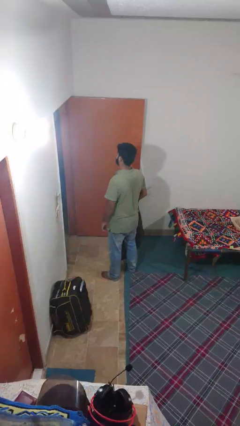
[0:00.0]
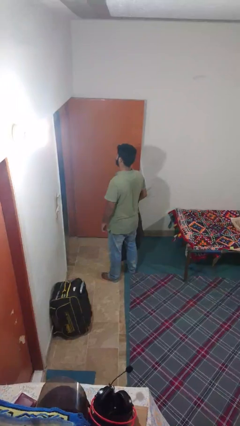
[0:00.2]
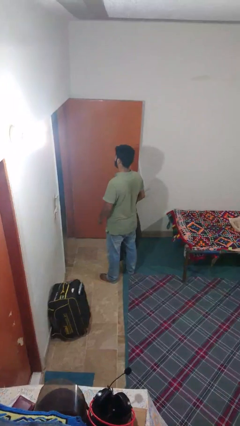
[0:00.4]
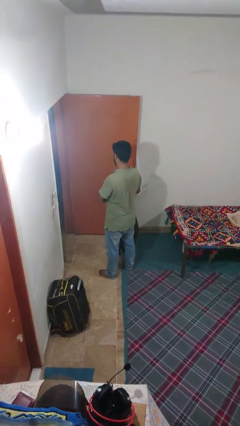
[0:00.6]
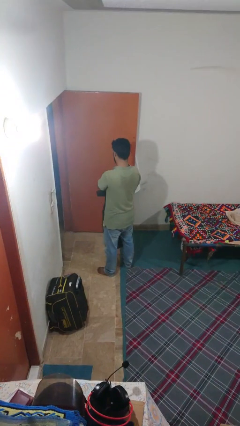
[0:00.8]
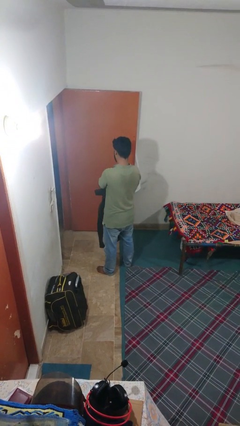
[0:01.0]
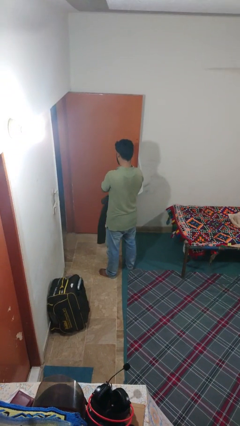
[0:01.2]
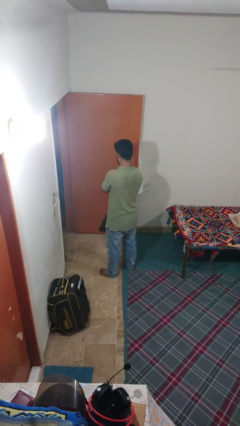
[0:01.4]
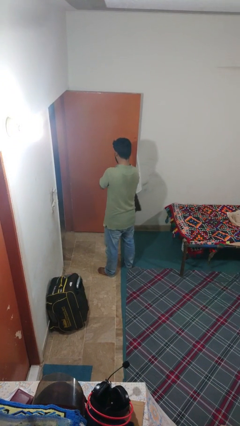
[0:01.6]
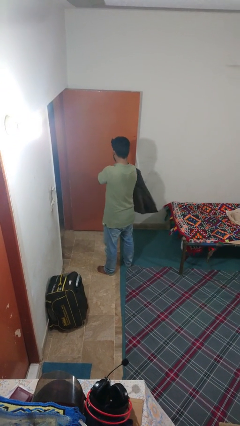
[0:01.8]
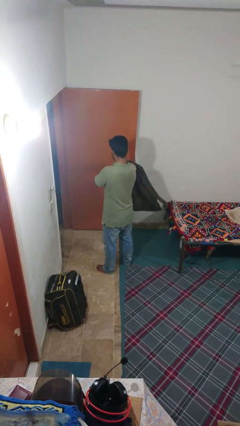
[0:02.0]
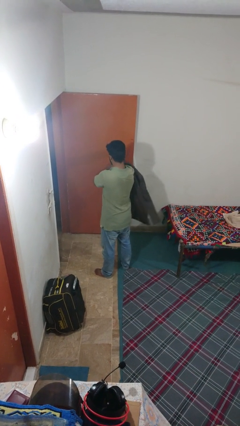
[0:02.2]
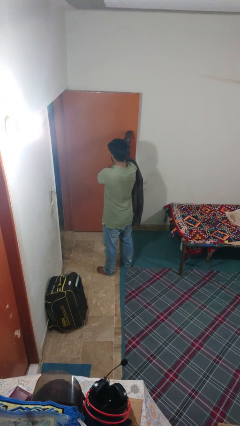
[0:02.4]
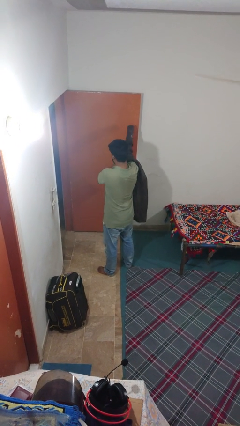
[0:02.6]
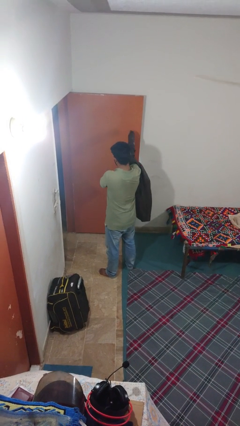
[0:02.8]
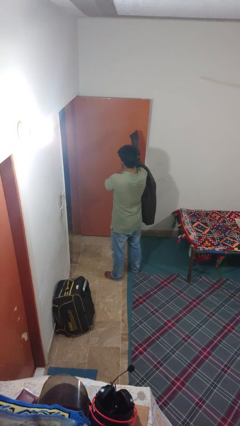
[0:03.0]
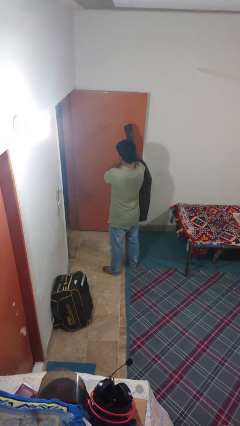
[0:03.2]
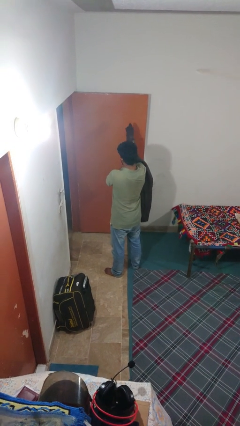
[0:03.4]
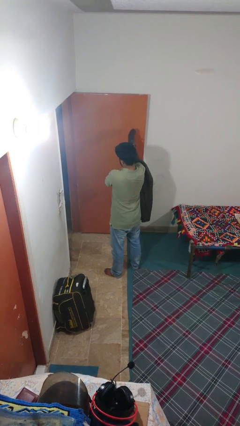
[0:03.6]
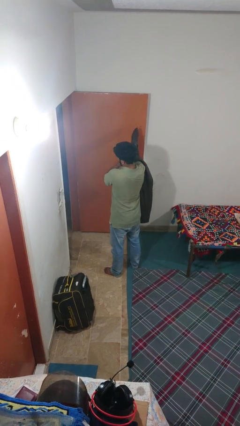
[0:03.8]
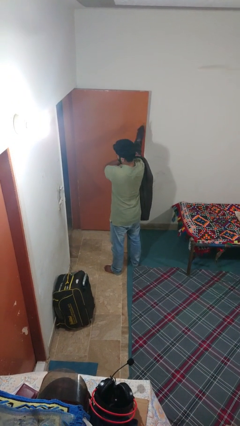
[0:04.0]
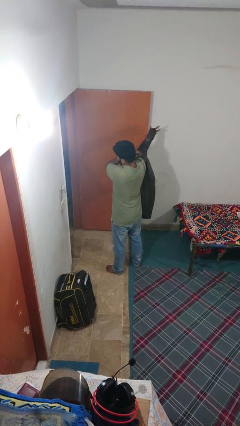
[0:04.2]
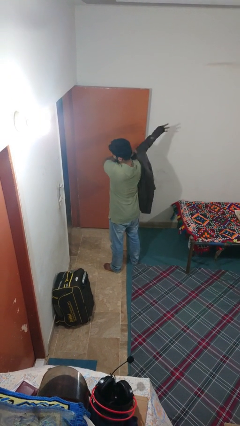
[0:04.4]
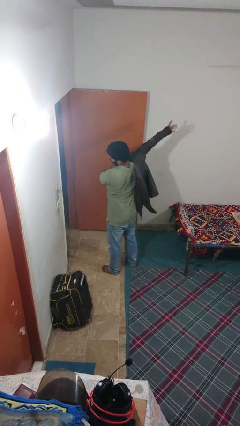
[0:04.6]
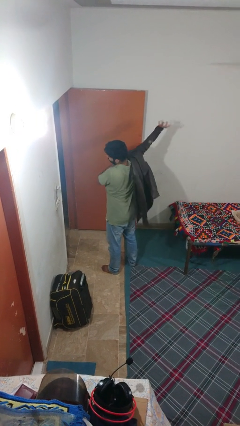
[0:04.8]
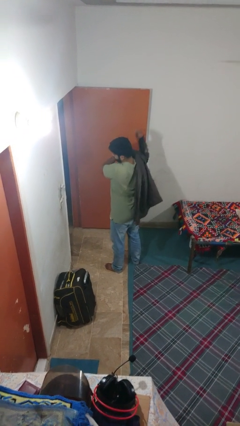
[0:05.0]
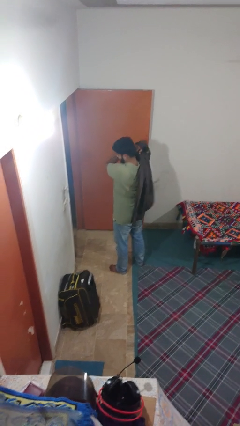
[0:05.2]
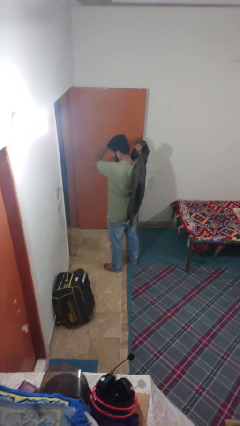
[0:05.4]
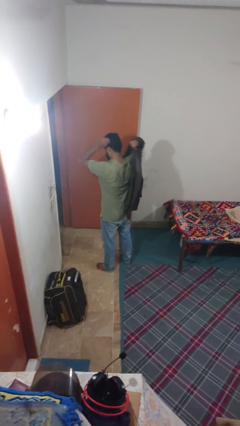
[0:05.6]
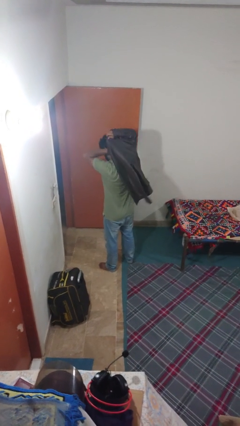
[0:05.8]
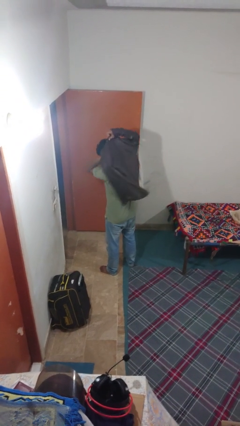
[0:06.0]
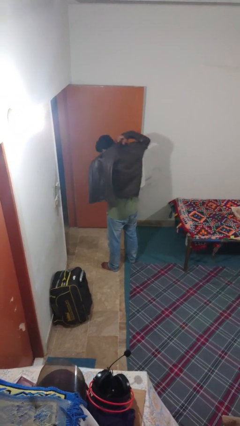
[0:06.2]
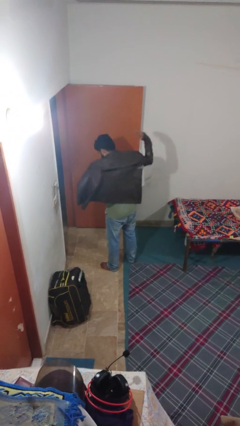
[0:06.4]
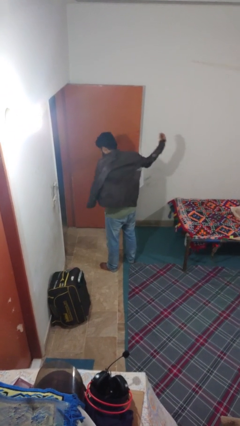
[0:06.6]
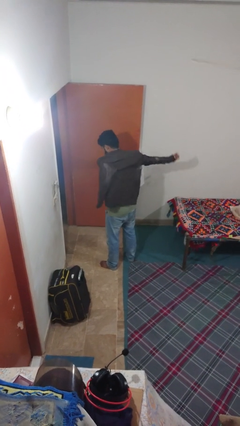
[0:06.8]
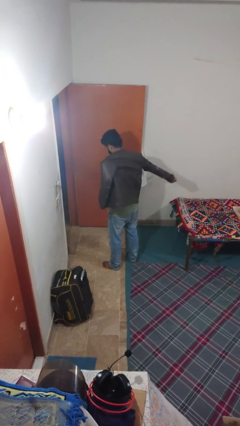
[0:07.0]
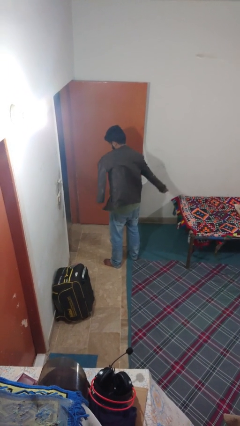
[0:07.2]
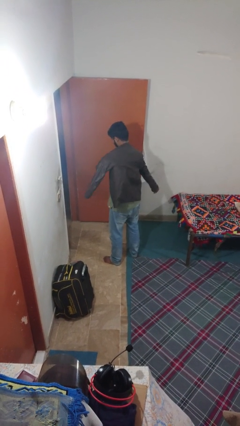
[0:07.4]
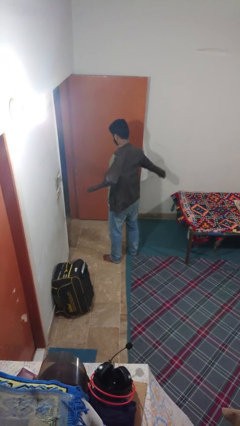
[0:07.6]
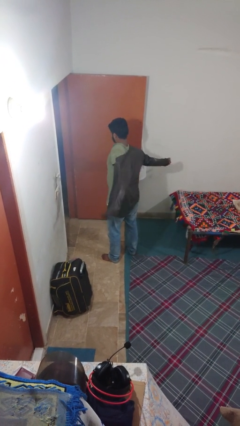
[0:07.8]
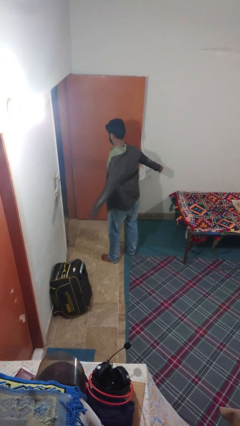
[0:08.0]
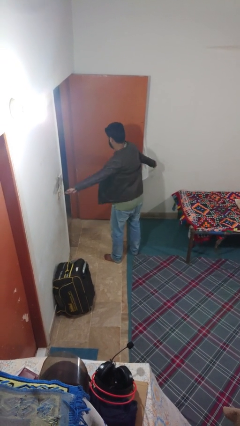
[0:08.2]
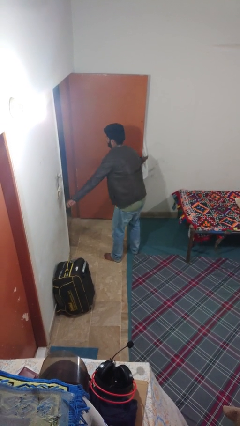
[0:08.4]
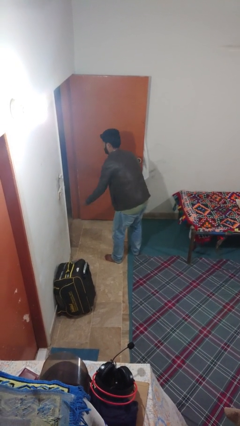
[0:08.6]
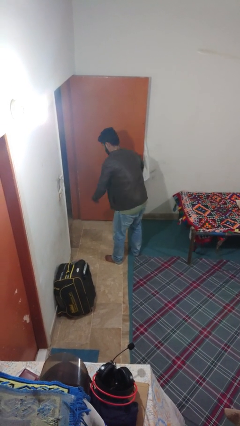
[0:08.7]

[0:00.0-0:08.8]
person puts on jacket

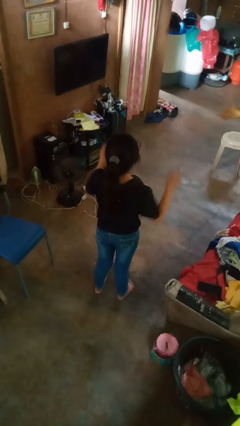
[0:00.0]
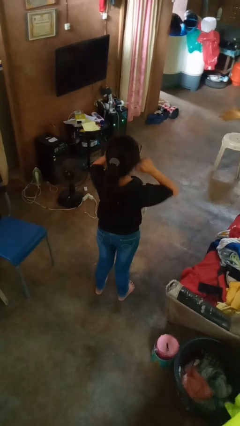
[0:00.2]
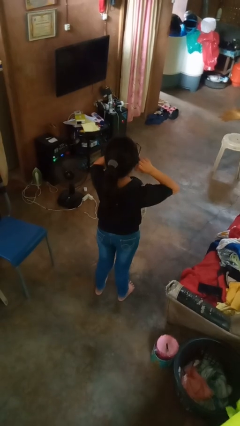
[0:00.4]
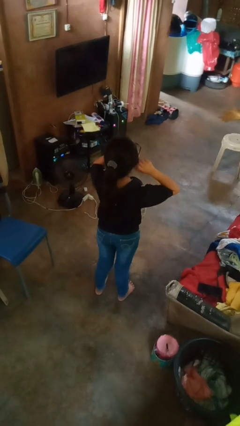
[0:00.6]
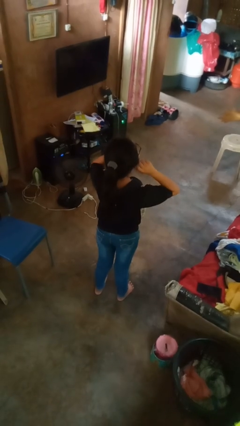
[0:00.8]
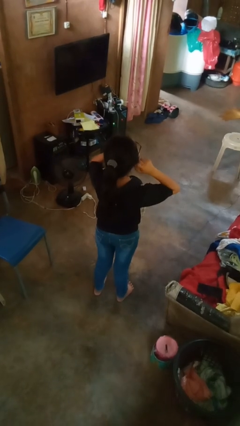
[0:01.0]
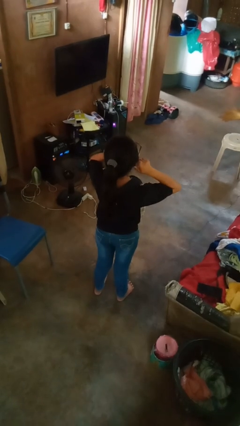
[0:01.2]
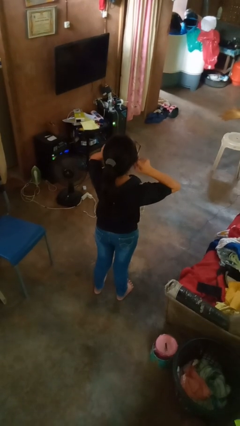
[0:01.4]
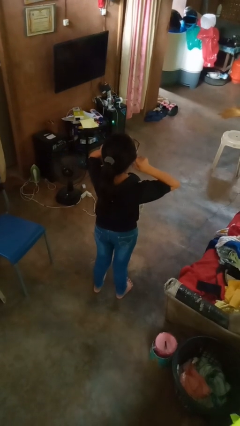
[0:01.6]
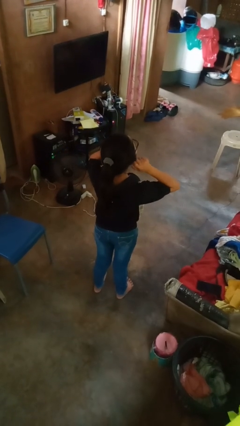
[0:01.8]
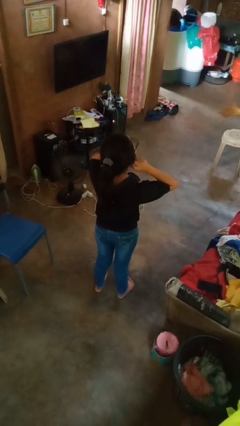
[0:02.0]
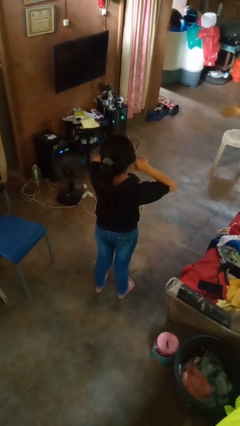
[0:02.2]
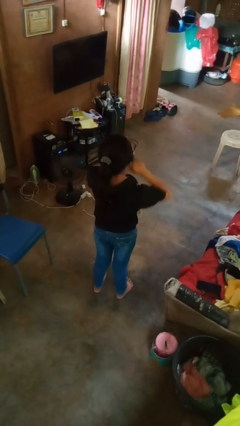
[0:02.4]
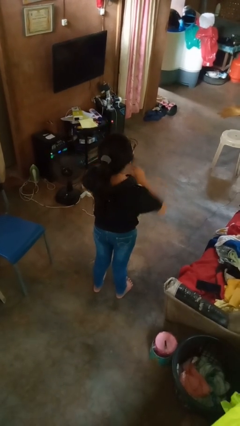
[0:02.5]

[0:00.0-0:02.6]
person touches earlobe

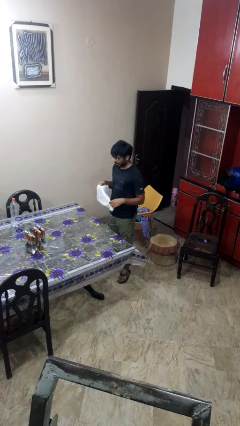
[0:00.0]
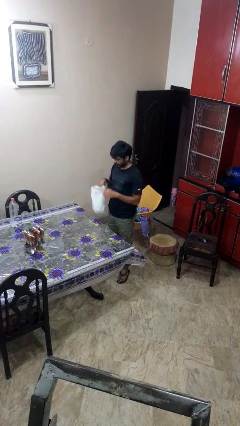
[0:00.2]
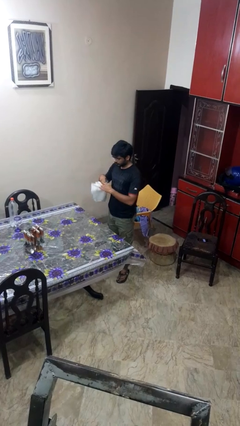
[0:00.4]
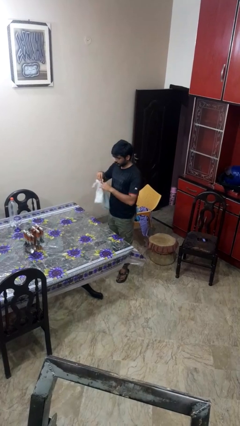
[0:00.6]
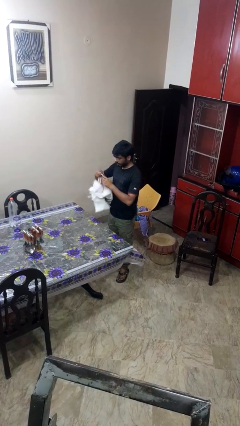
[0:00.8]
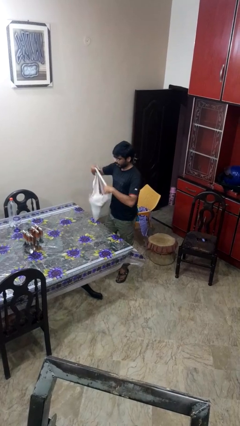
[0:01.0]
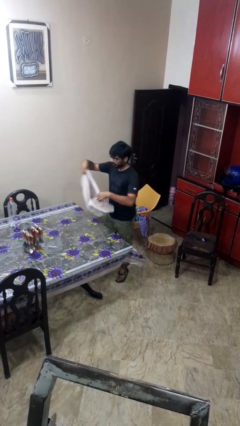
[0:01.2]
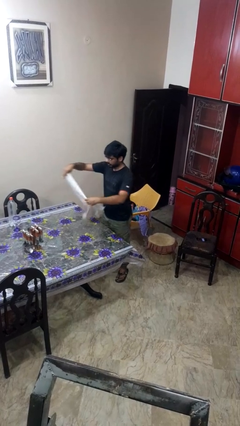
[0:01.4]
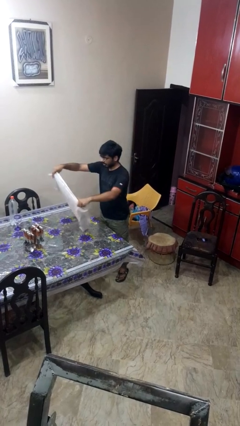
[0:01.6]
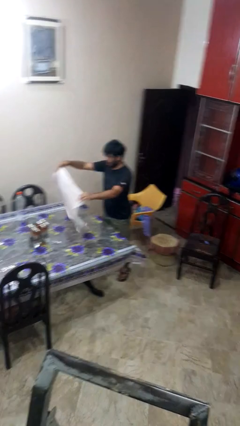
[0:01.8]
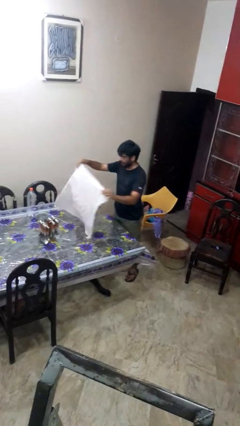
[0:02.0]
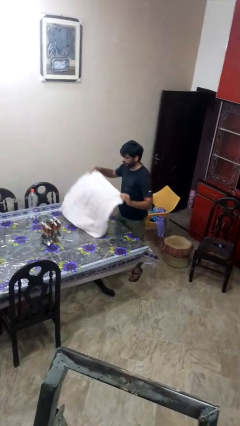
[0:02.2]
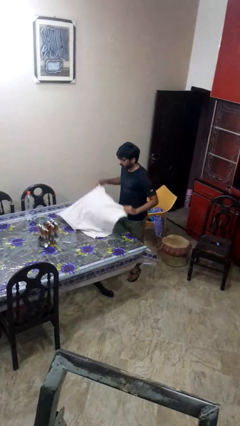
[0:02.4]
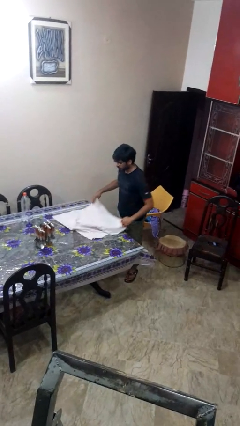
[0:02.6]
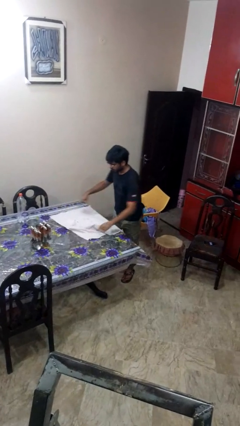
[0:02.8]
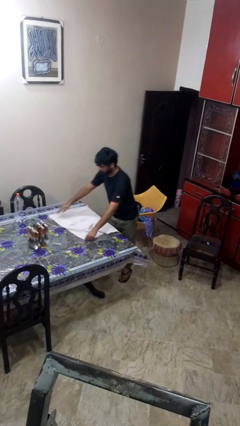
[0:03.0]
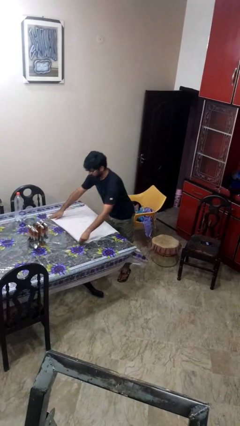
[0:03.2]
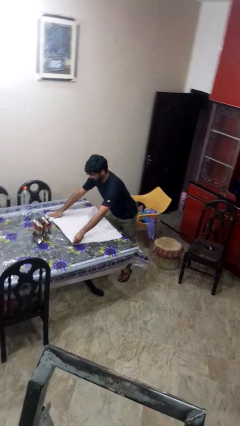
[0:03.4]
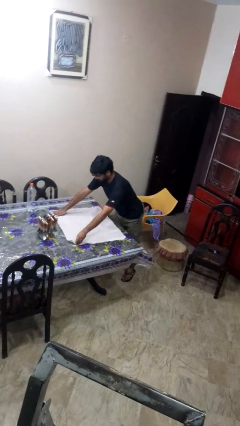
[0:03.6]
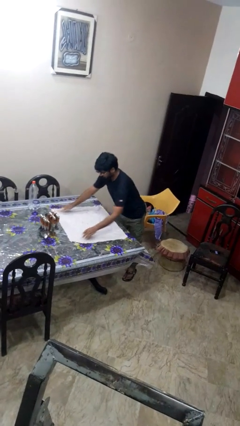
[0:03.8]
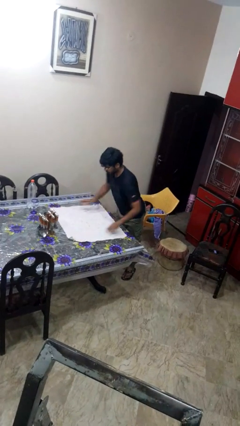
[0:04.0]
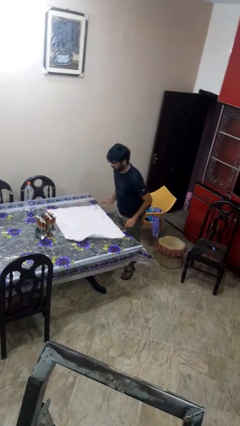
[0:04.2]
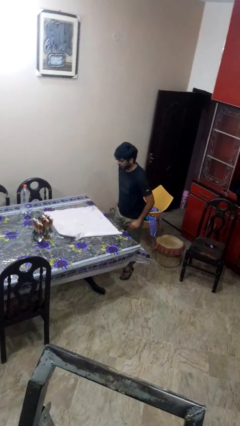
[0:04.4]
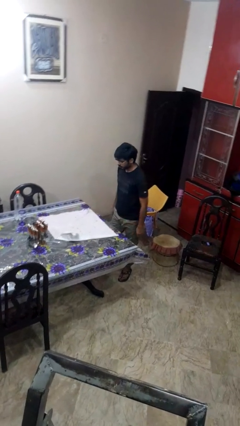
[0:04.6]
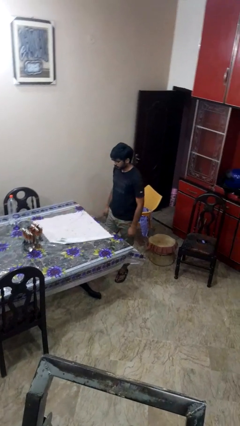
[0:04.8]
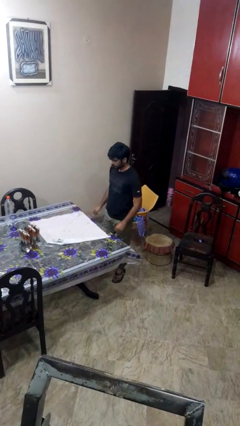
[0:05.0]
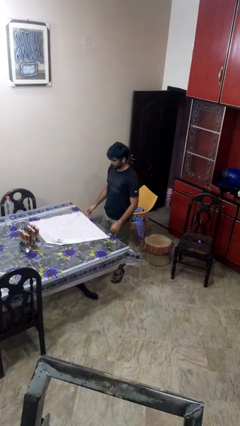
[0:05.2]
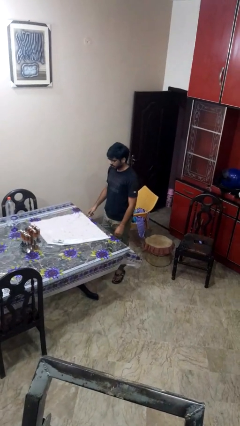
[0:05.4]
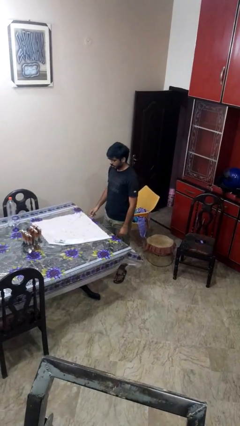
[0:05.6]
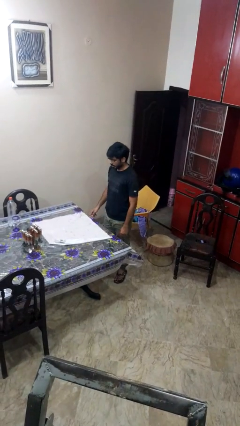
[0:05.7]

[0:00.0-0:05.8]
person spreads tablecloth

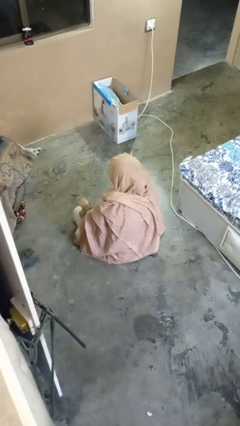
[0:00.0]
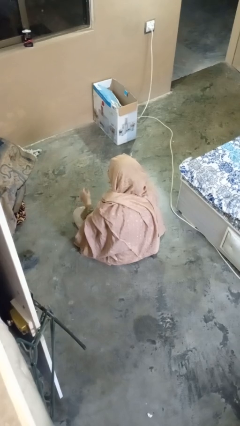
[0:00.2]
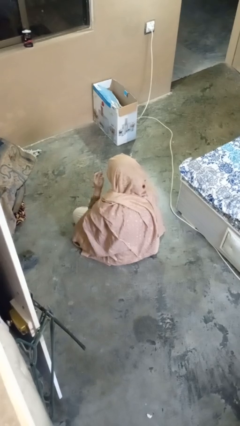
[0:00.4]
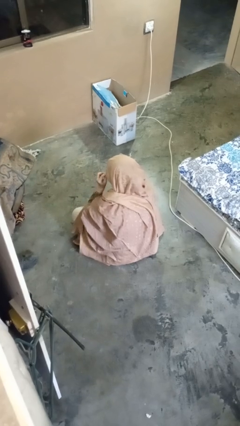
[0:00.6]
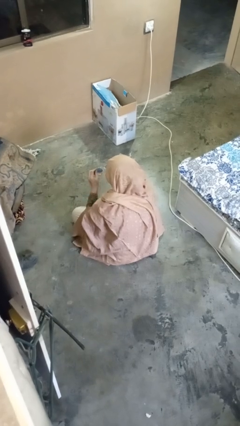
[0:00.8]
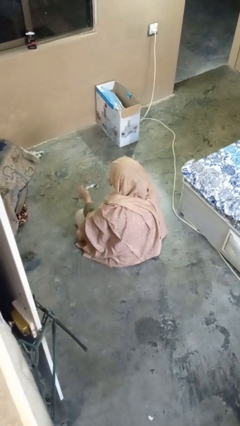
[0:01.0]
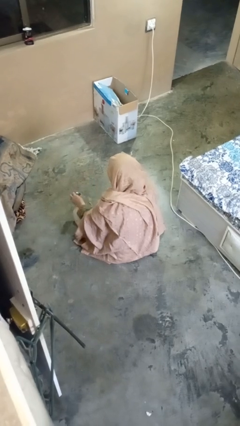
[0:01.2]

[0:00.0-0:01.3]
person takes off glasses
